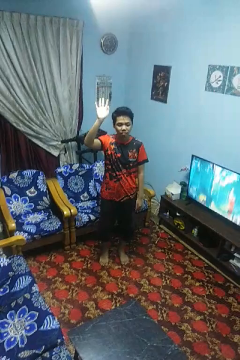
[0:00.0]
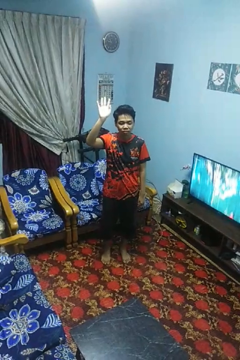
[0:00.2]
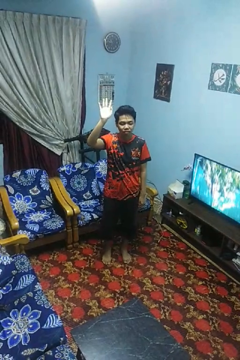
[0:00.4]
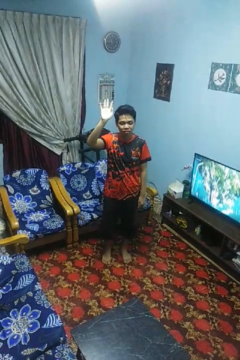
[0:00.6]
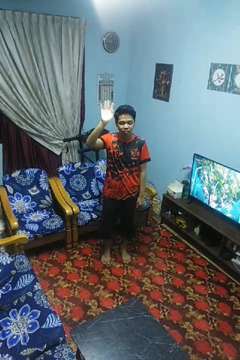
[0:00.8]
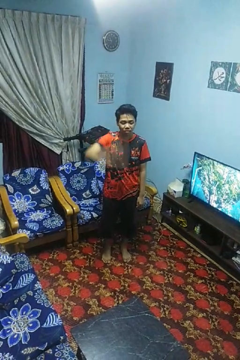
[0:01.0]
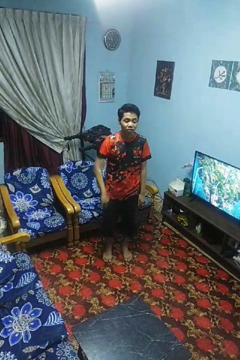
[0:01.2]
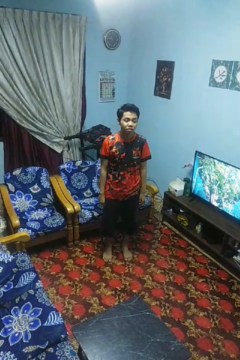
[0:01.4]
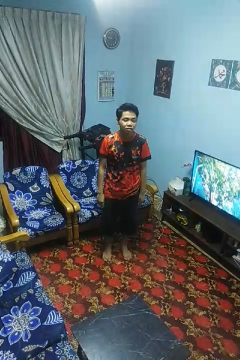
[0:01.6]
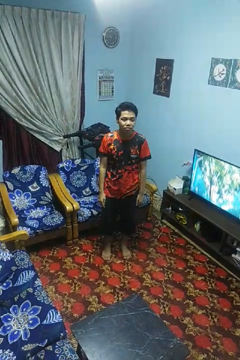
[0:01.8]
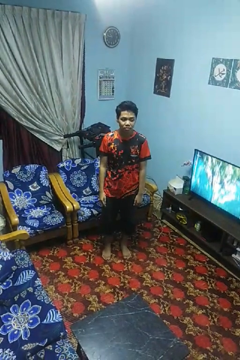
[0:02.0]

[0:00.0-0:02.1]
person gestures swipe down

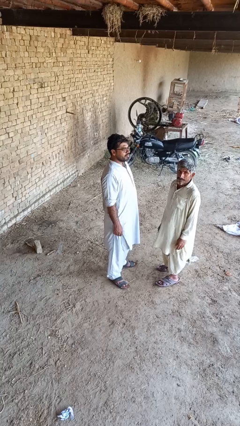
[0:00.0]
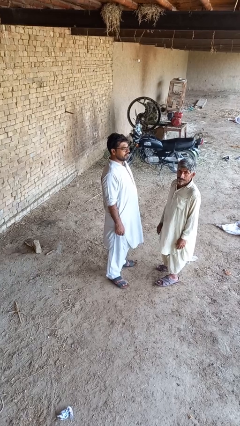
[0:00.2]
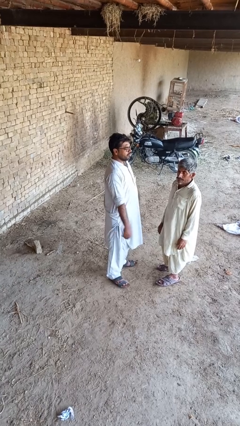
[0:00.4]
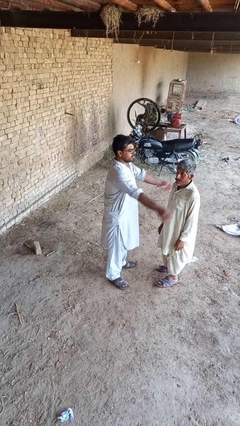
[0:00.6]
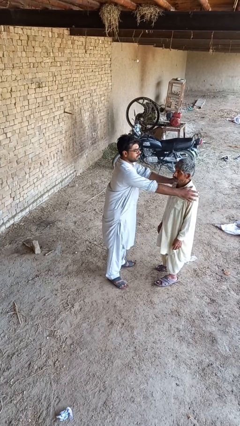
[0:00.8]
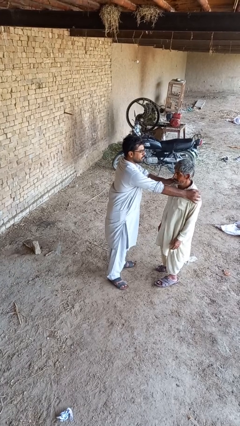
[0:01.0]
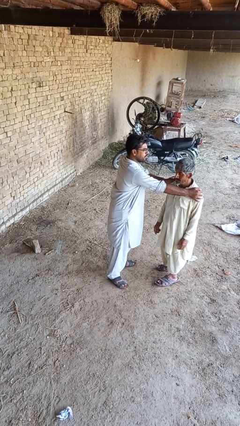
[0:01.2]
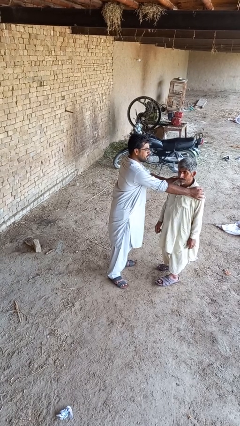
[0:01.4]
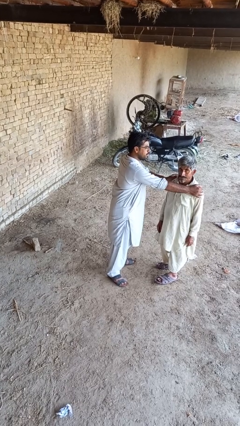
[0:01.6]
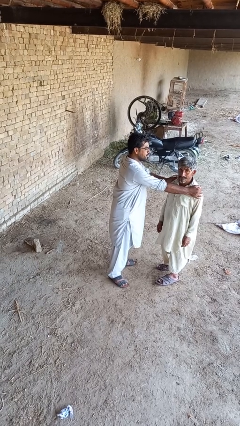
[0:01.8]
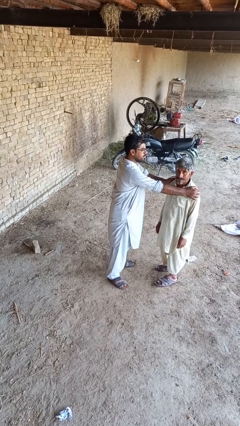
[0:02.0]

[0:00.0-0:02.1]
person grabs person by shoulder

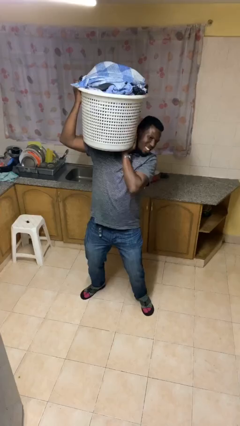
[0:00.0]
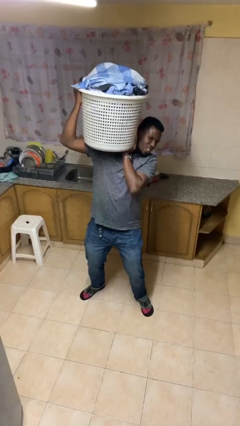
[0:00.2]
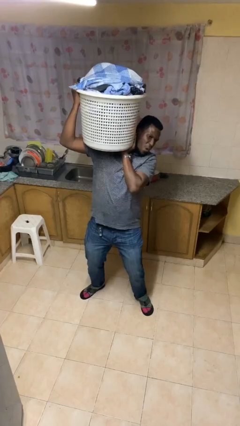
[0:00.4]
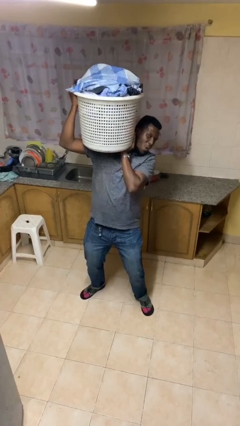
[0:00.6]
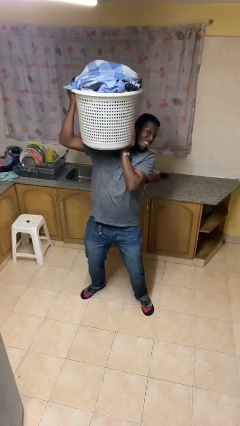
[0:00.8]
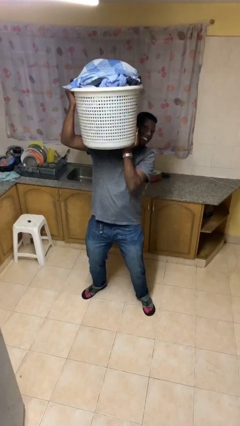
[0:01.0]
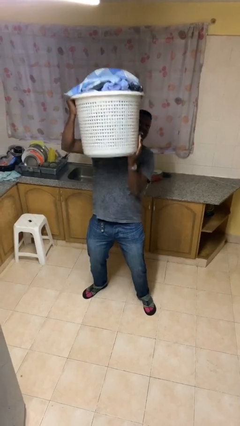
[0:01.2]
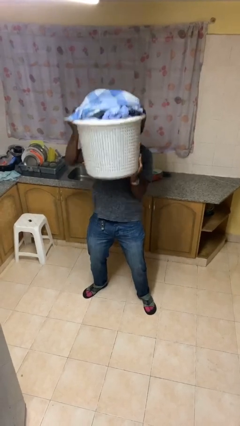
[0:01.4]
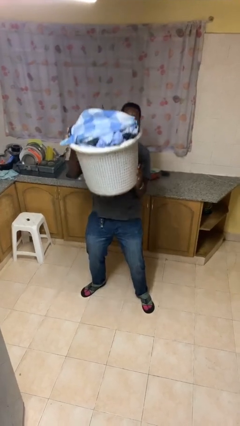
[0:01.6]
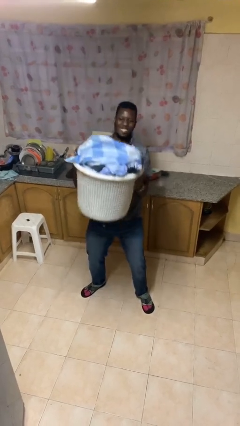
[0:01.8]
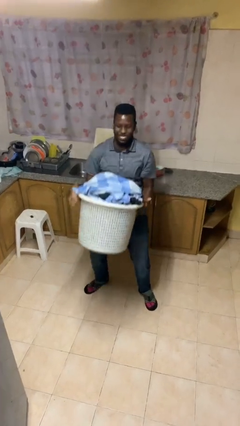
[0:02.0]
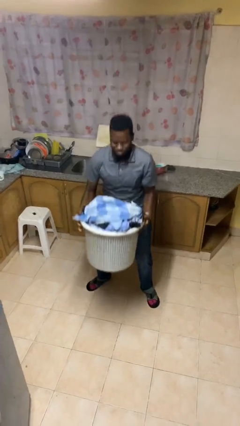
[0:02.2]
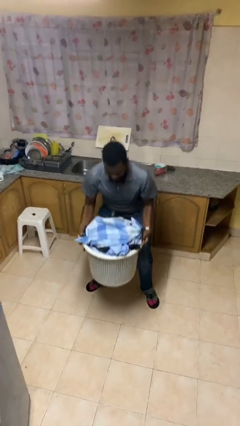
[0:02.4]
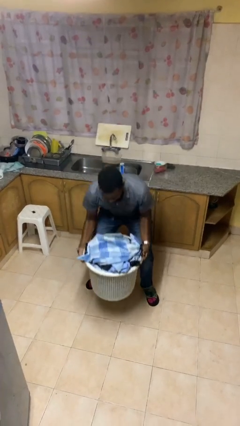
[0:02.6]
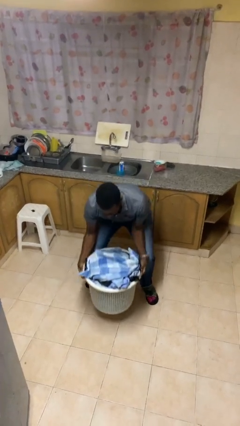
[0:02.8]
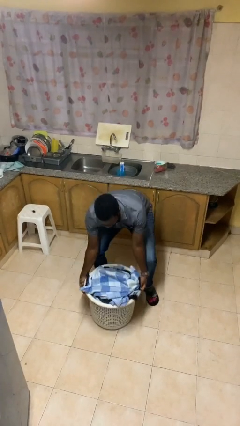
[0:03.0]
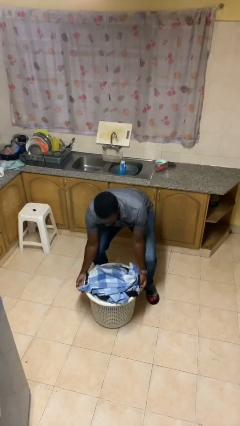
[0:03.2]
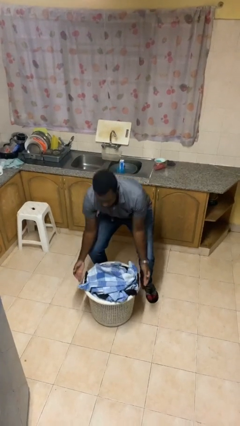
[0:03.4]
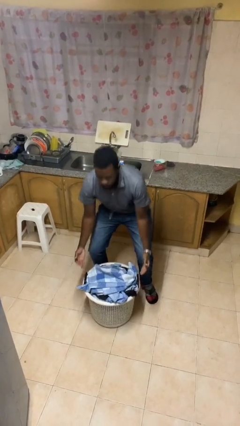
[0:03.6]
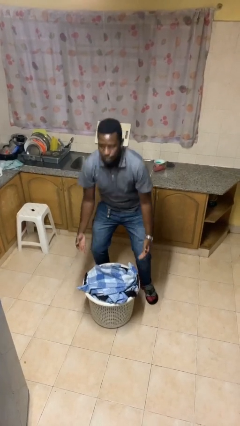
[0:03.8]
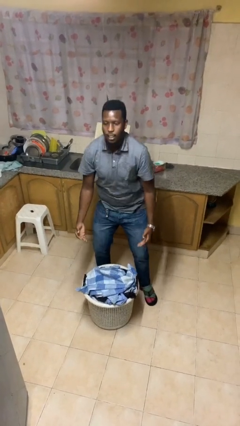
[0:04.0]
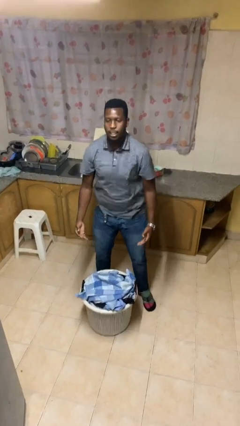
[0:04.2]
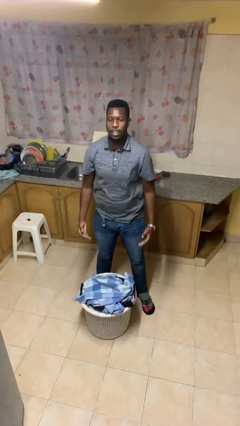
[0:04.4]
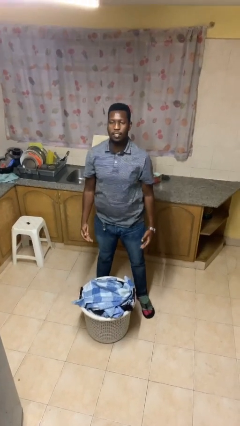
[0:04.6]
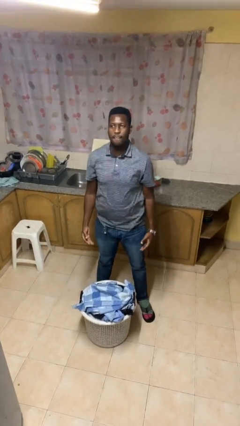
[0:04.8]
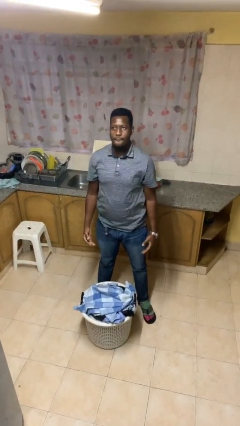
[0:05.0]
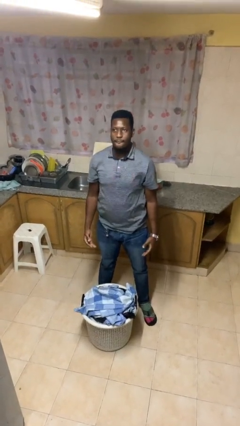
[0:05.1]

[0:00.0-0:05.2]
person puts down object on floor

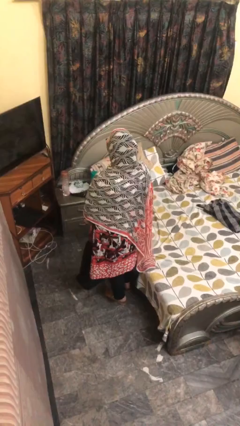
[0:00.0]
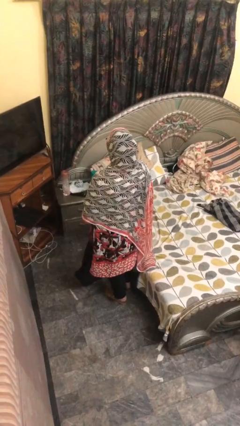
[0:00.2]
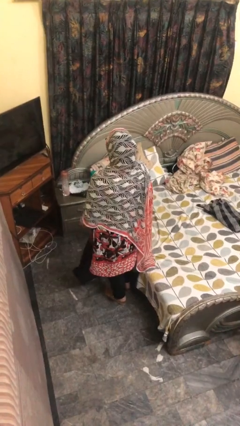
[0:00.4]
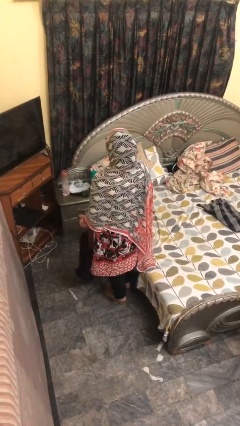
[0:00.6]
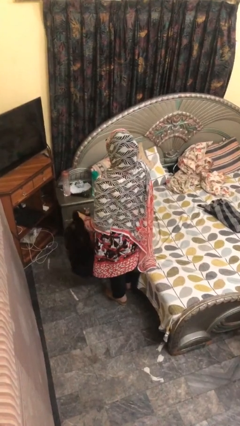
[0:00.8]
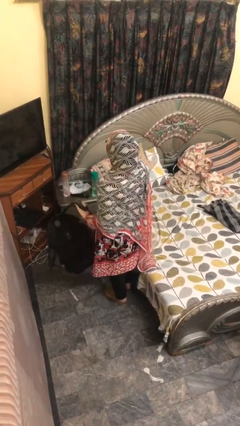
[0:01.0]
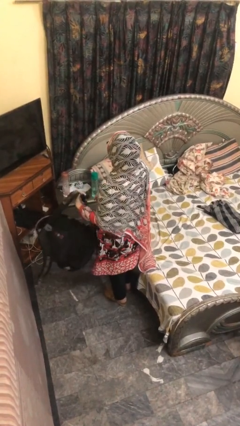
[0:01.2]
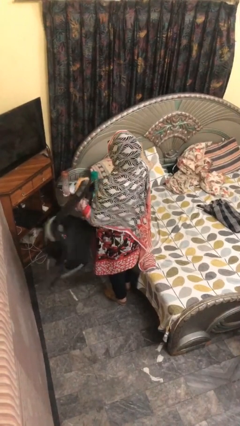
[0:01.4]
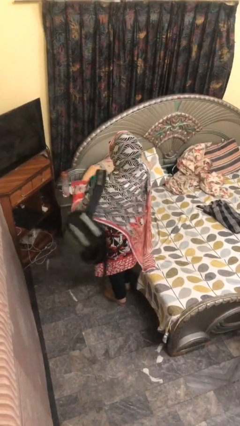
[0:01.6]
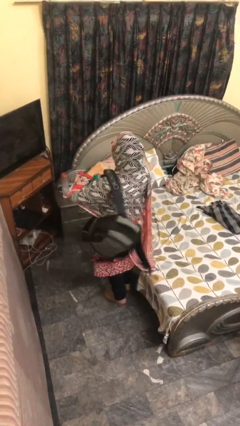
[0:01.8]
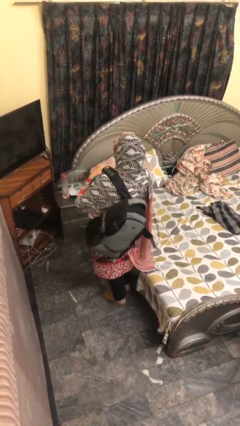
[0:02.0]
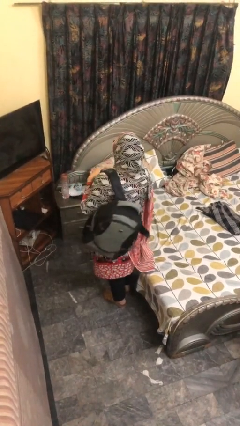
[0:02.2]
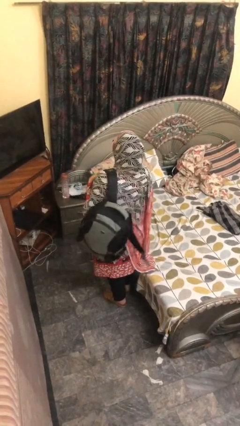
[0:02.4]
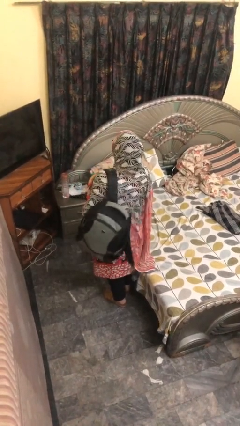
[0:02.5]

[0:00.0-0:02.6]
person puts on backpack

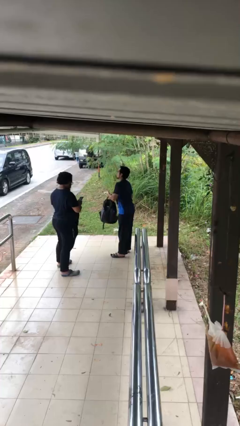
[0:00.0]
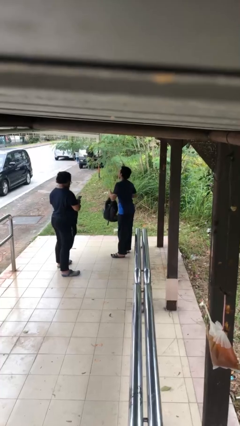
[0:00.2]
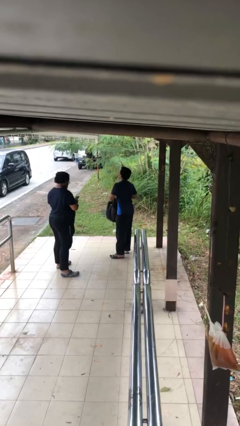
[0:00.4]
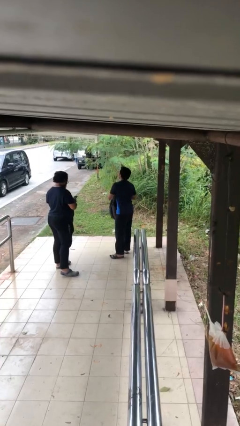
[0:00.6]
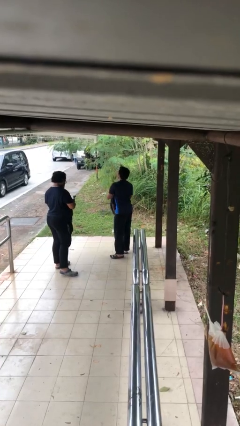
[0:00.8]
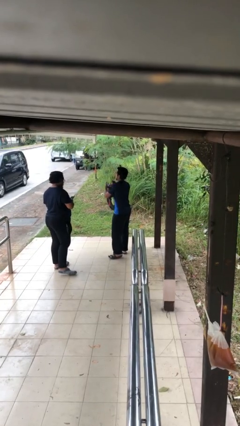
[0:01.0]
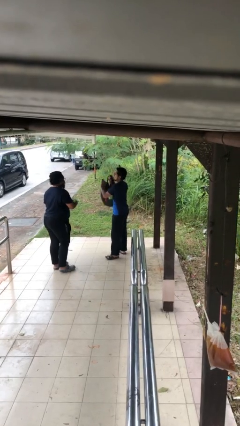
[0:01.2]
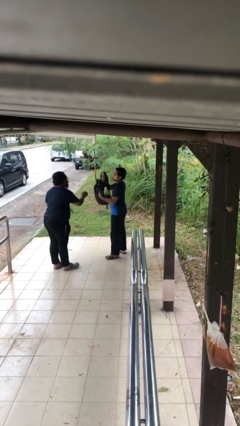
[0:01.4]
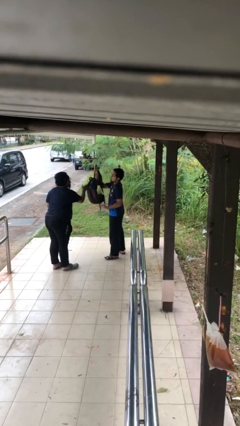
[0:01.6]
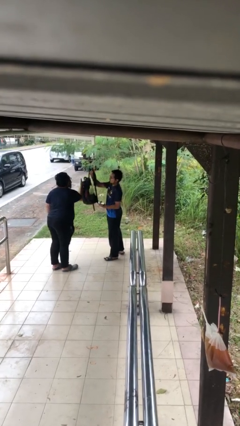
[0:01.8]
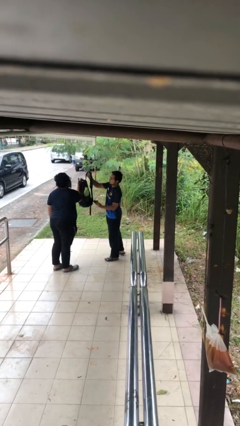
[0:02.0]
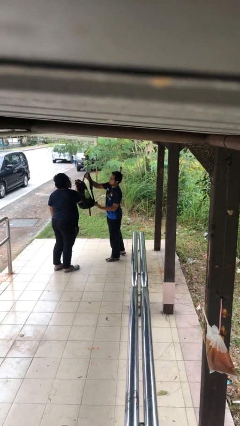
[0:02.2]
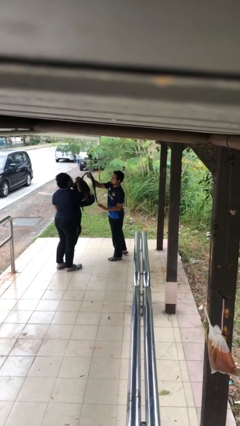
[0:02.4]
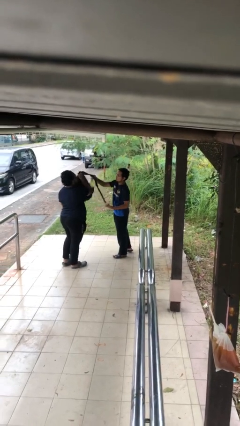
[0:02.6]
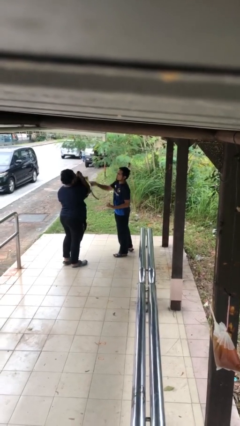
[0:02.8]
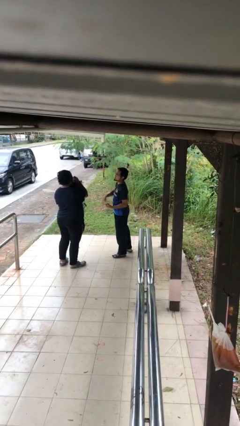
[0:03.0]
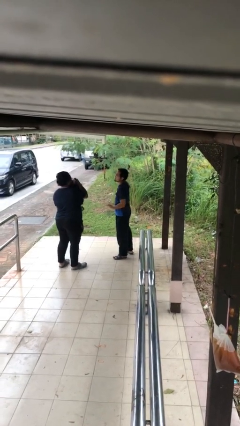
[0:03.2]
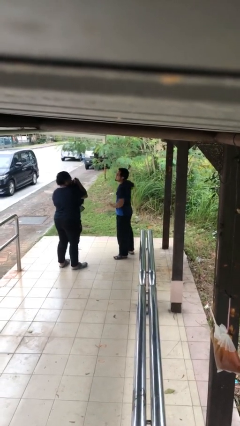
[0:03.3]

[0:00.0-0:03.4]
person transfers object to person

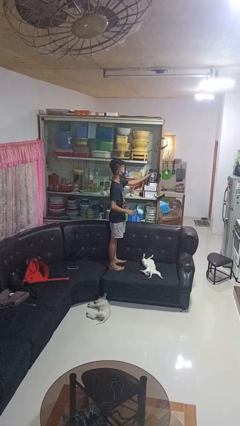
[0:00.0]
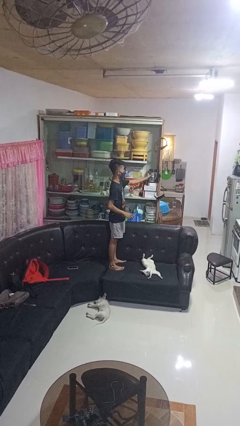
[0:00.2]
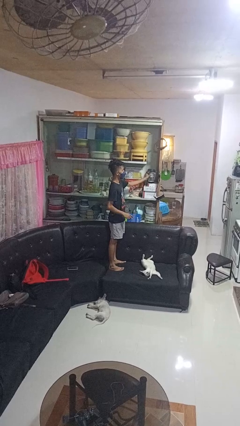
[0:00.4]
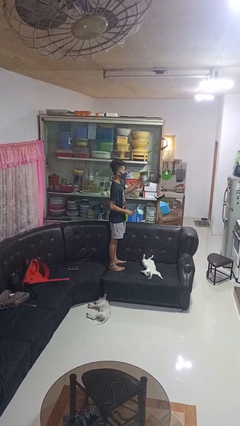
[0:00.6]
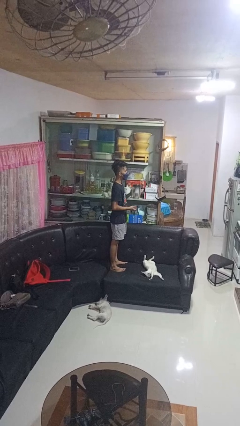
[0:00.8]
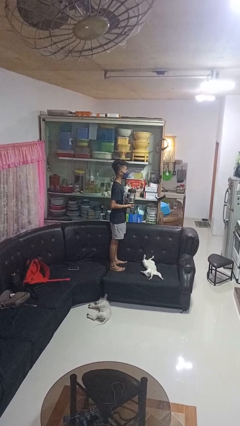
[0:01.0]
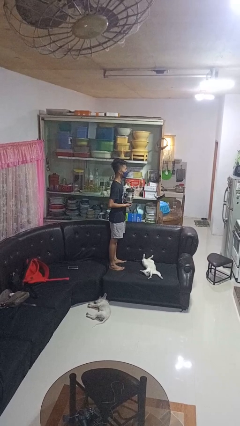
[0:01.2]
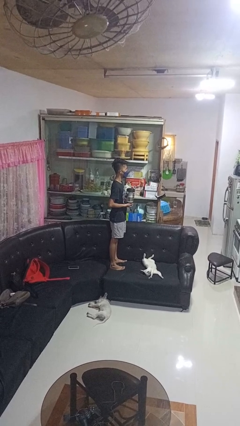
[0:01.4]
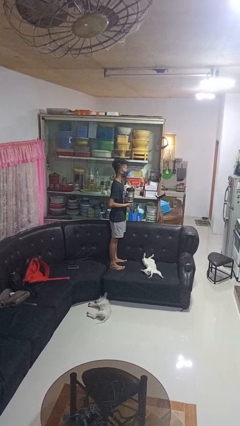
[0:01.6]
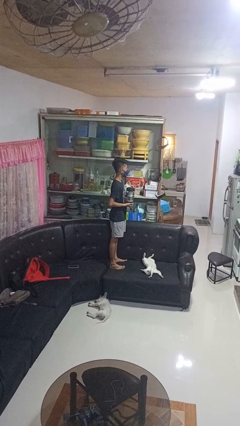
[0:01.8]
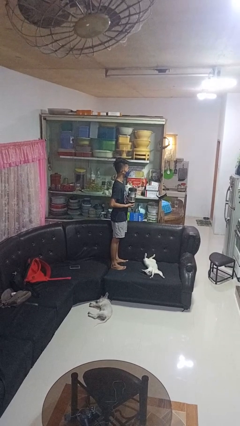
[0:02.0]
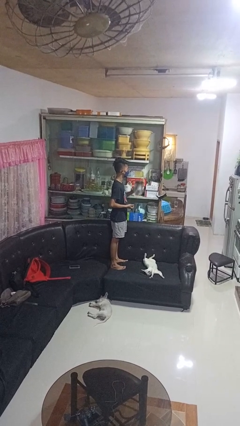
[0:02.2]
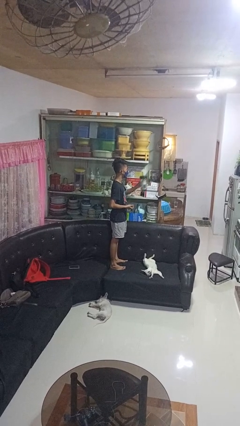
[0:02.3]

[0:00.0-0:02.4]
person picks up object from cabinet
